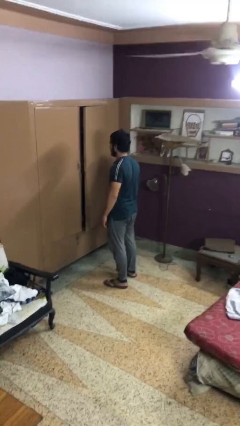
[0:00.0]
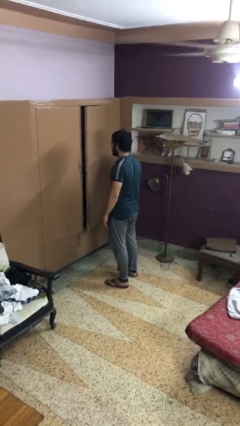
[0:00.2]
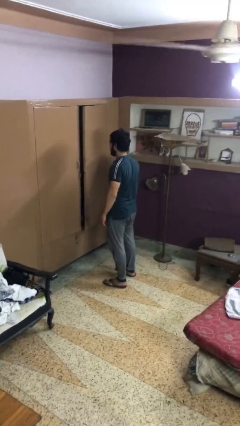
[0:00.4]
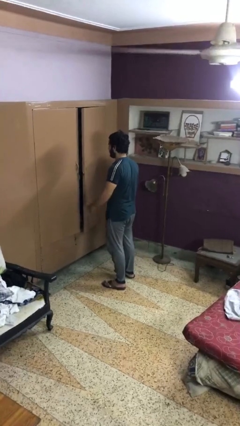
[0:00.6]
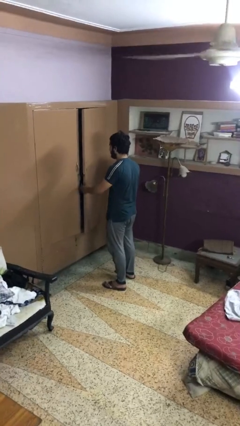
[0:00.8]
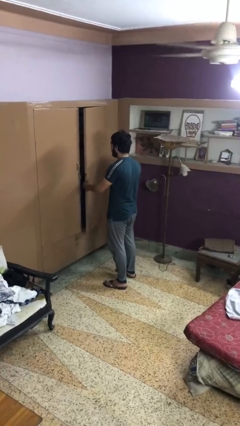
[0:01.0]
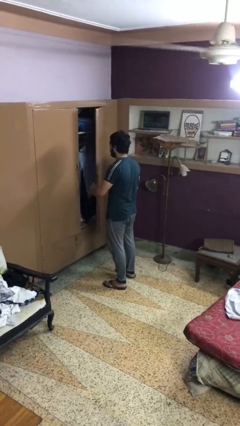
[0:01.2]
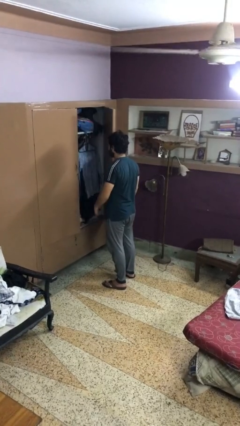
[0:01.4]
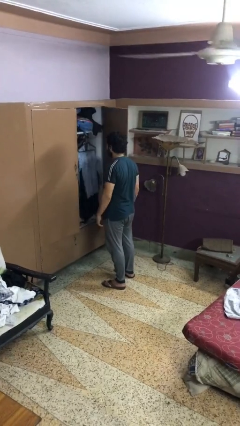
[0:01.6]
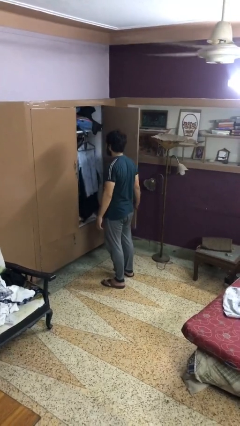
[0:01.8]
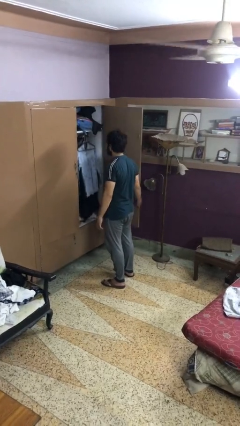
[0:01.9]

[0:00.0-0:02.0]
person opens closet door

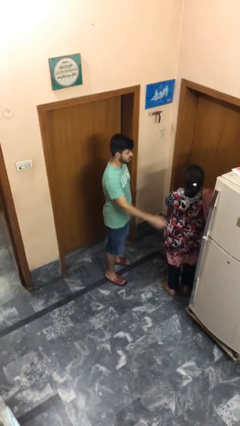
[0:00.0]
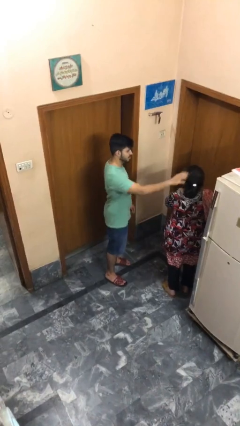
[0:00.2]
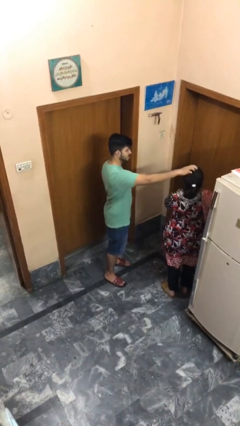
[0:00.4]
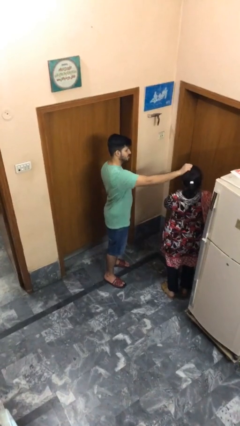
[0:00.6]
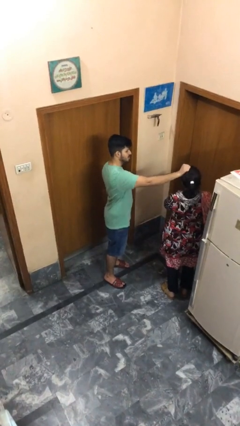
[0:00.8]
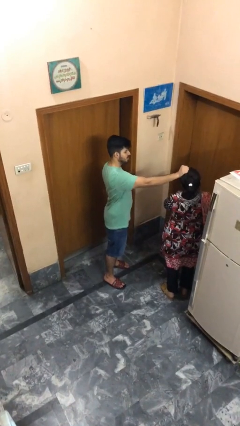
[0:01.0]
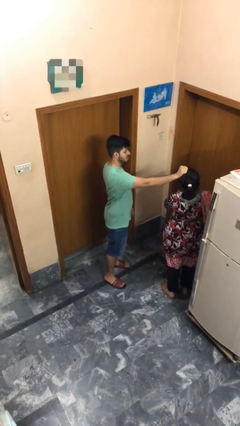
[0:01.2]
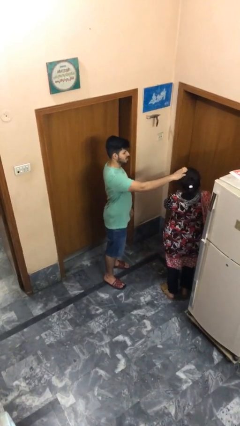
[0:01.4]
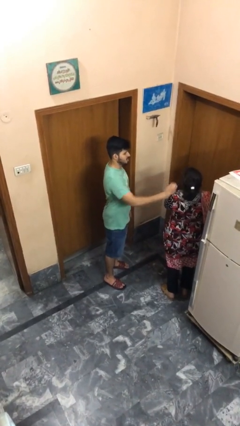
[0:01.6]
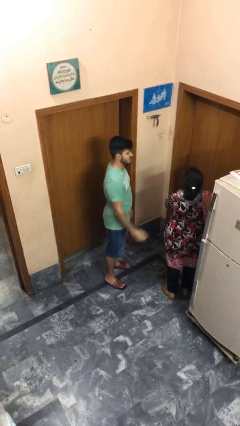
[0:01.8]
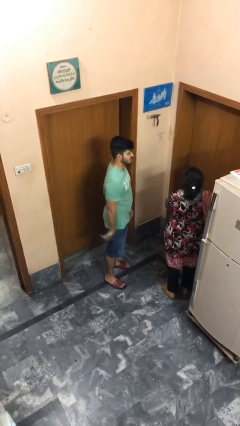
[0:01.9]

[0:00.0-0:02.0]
person grabs person by hair

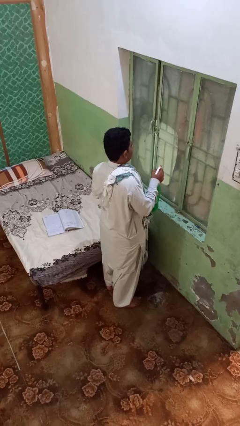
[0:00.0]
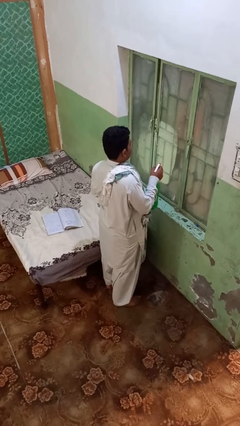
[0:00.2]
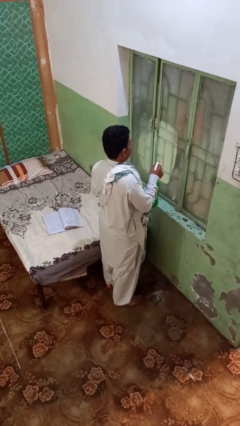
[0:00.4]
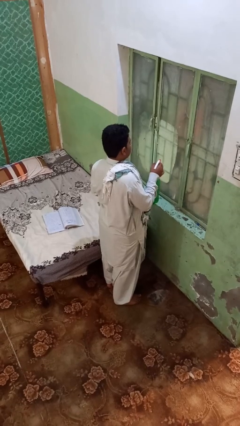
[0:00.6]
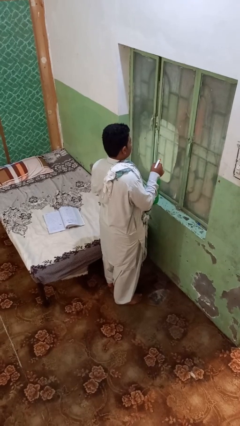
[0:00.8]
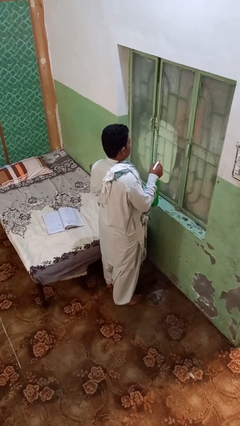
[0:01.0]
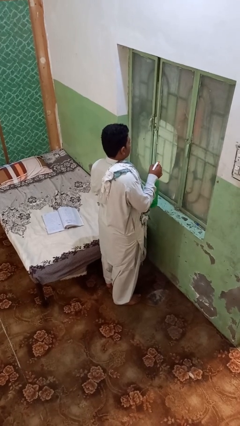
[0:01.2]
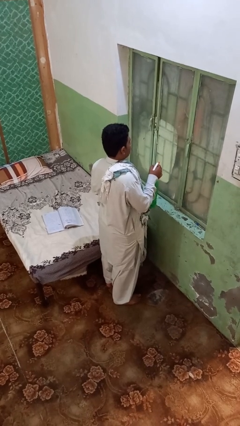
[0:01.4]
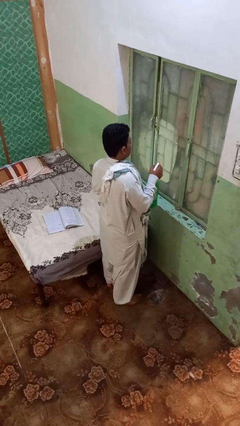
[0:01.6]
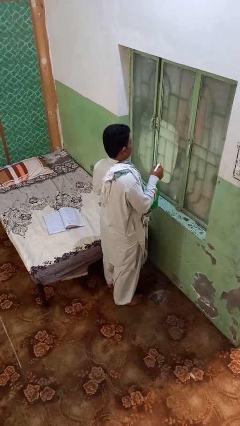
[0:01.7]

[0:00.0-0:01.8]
person sprays from bottle

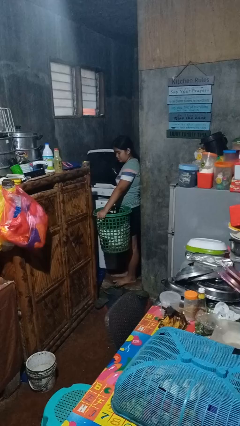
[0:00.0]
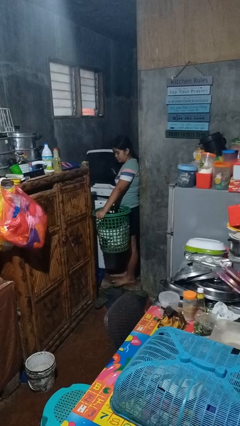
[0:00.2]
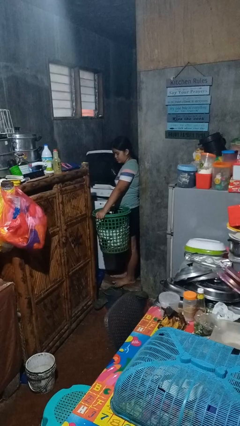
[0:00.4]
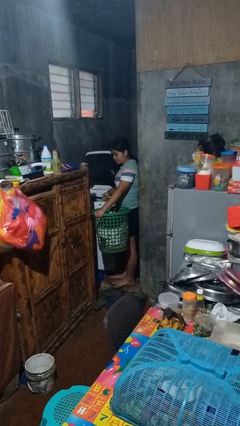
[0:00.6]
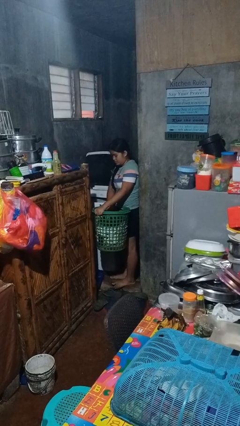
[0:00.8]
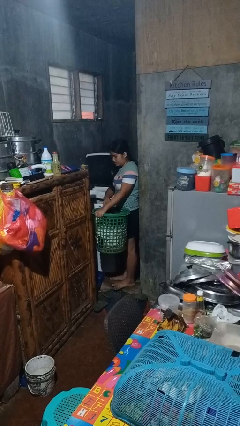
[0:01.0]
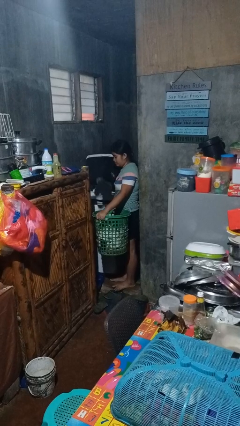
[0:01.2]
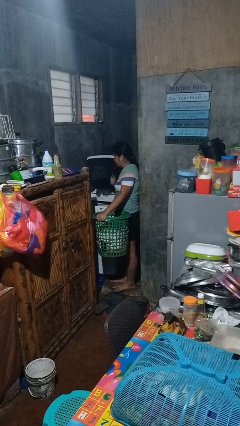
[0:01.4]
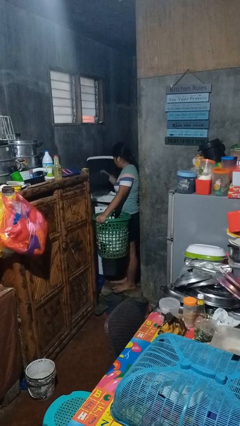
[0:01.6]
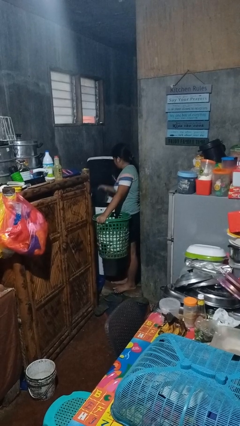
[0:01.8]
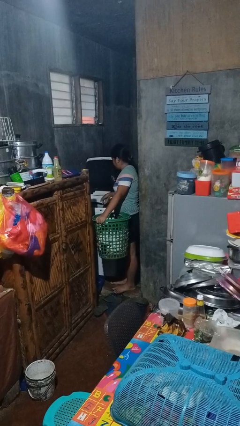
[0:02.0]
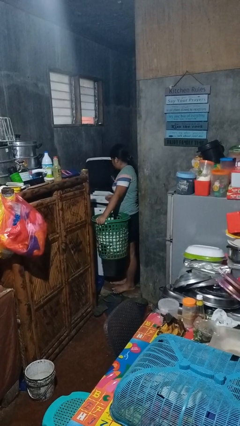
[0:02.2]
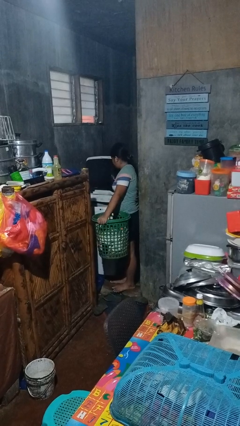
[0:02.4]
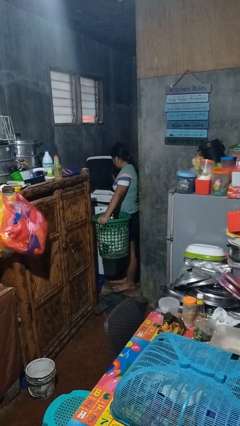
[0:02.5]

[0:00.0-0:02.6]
person loads clotheswasher

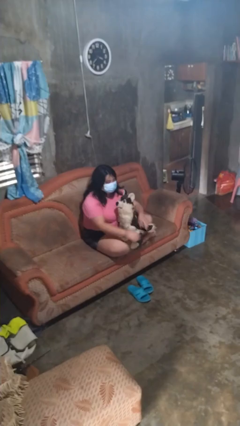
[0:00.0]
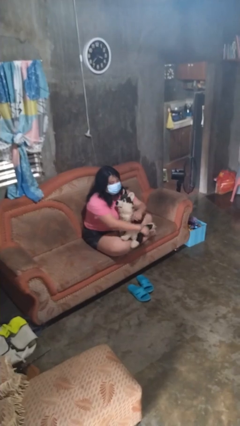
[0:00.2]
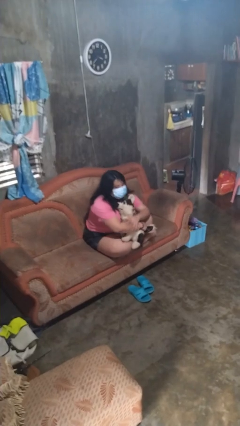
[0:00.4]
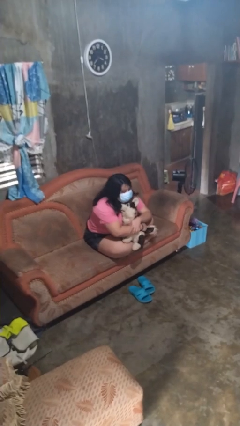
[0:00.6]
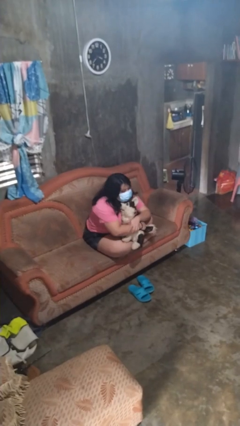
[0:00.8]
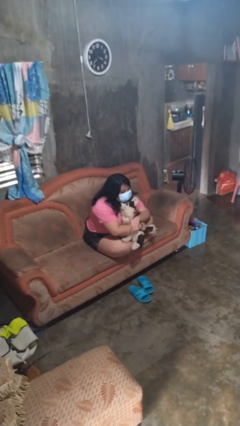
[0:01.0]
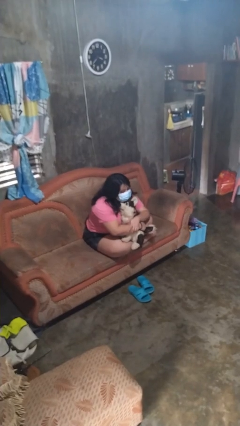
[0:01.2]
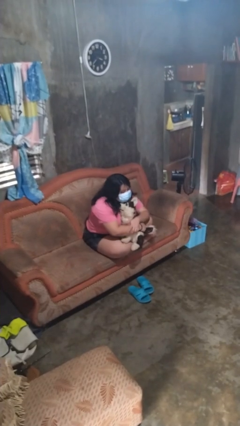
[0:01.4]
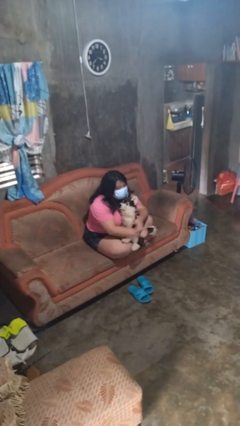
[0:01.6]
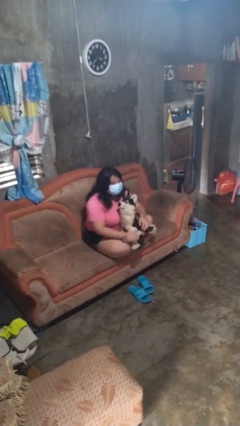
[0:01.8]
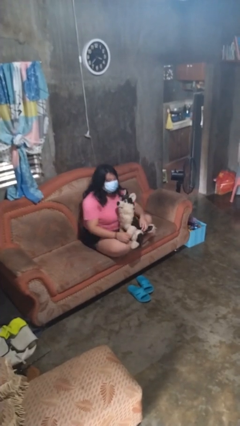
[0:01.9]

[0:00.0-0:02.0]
person hugs stuffed animal

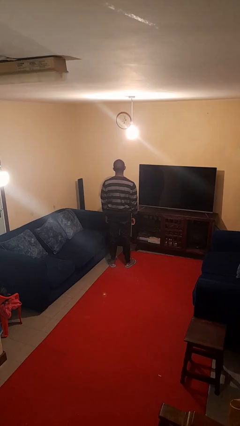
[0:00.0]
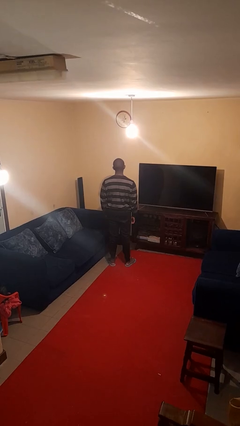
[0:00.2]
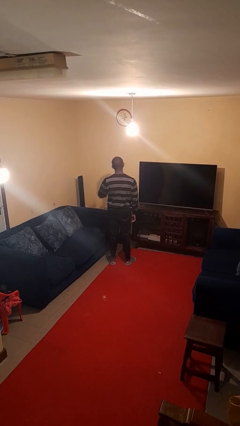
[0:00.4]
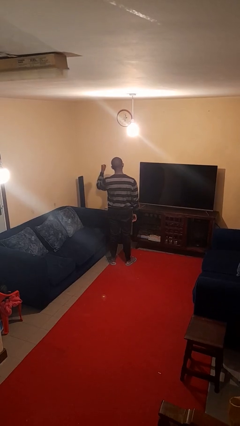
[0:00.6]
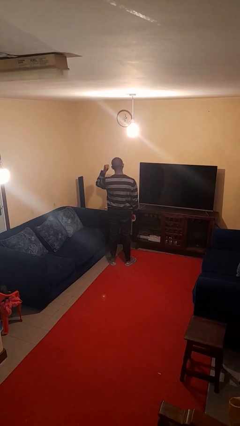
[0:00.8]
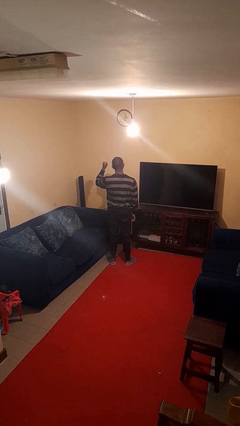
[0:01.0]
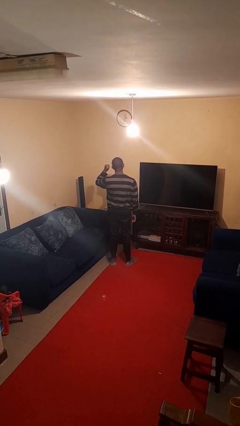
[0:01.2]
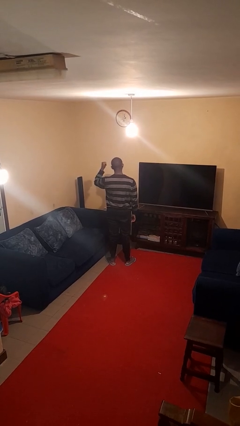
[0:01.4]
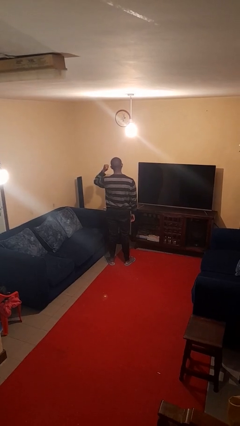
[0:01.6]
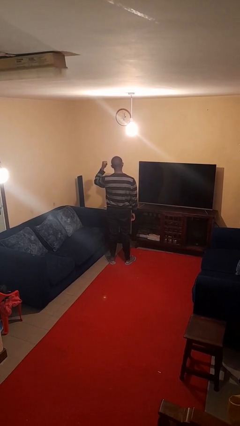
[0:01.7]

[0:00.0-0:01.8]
person gestures behind me

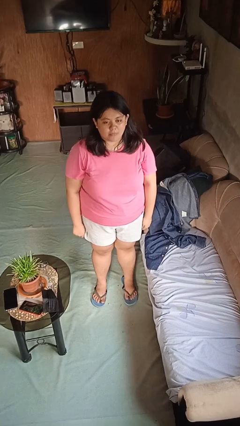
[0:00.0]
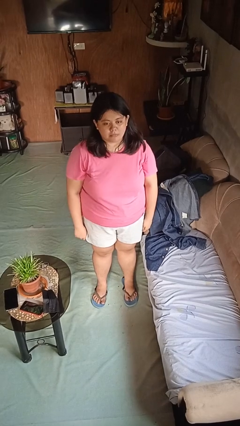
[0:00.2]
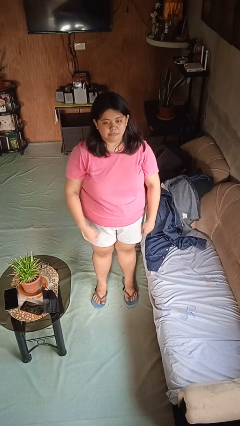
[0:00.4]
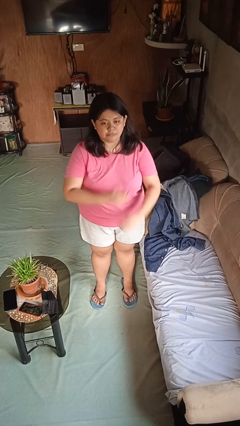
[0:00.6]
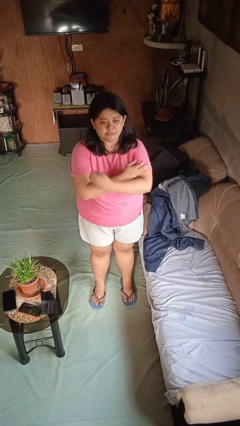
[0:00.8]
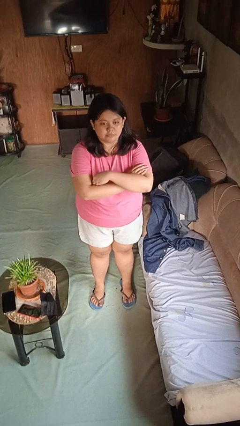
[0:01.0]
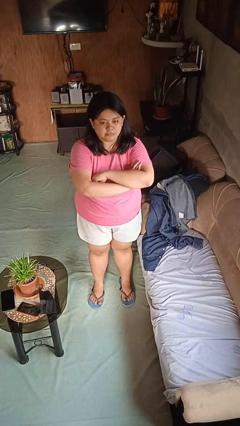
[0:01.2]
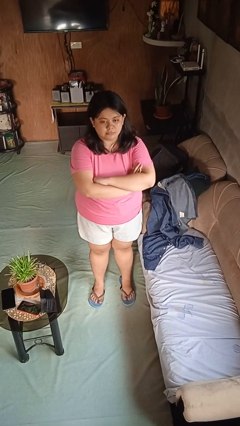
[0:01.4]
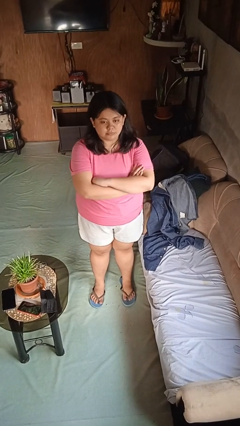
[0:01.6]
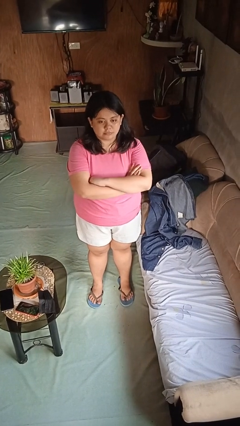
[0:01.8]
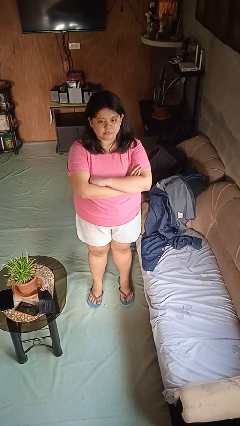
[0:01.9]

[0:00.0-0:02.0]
person crosses arms

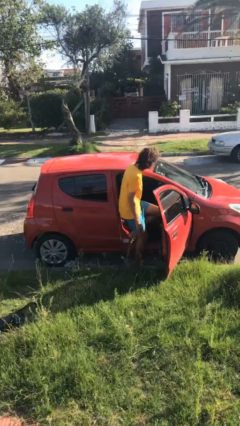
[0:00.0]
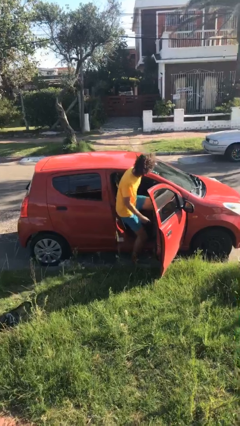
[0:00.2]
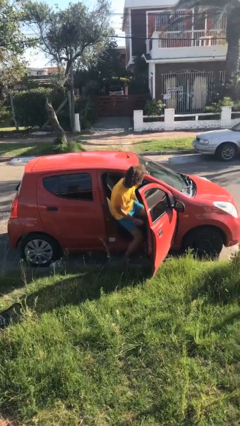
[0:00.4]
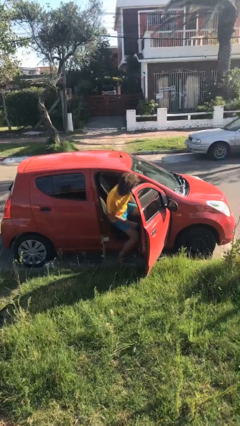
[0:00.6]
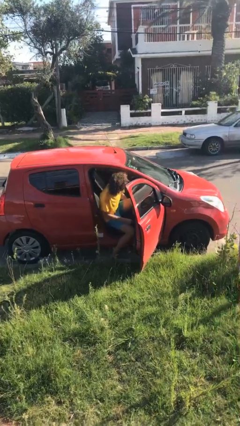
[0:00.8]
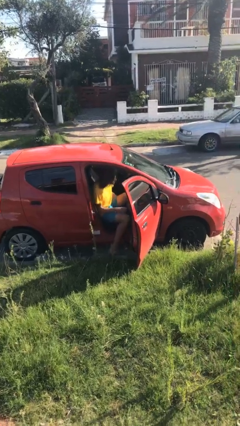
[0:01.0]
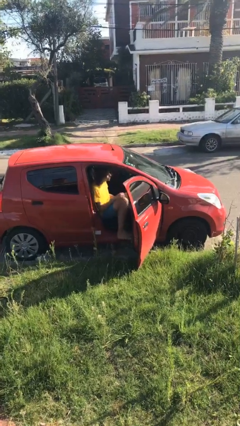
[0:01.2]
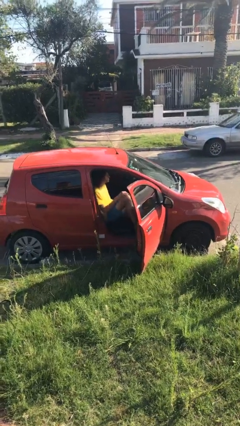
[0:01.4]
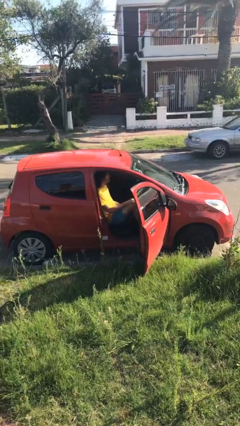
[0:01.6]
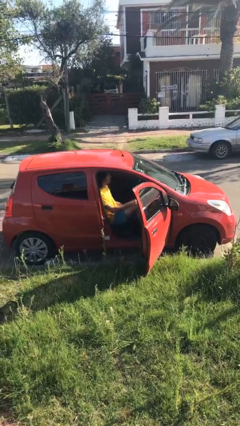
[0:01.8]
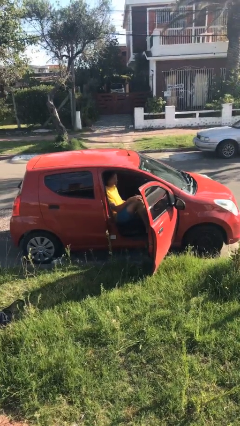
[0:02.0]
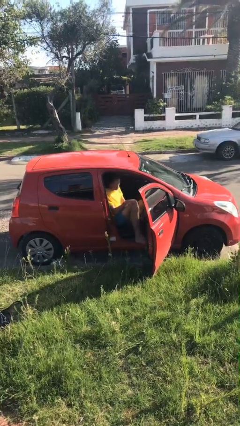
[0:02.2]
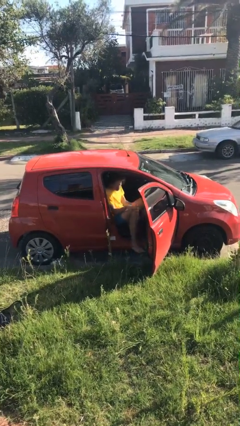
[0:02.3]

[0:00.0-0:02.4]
person enters car
